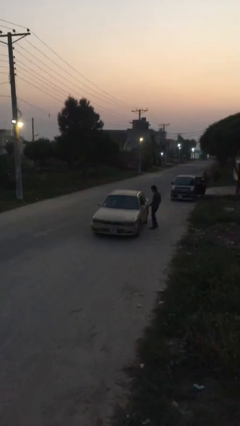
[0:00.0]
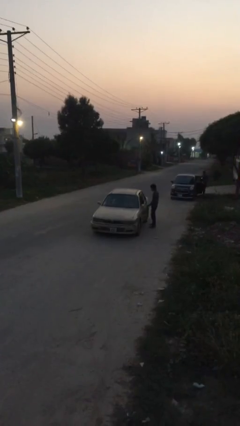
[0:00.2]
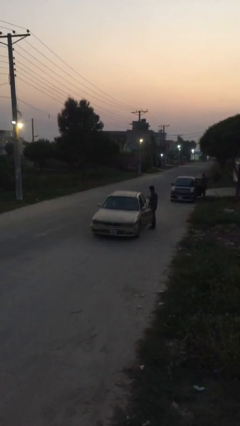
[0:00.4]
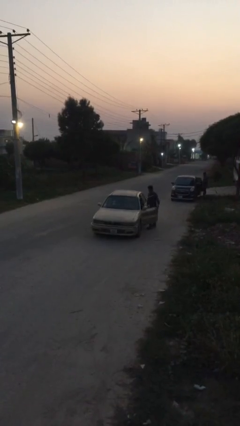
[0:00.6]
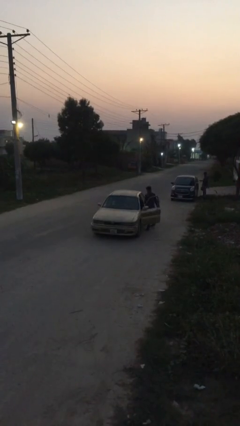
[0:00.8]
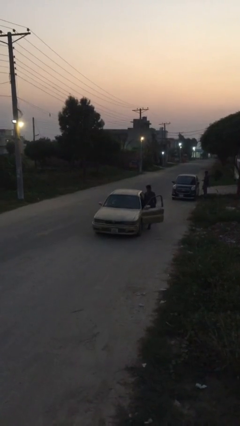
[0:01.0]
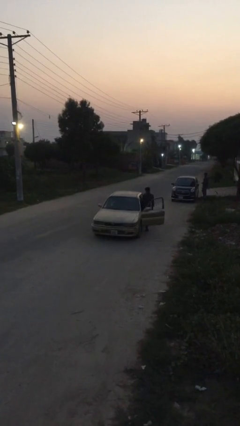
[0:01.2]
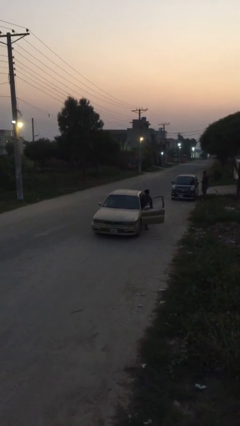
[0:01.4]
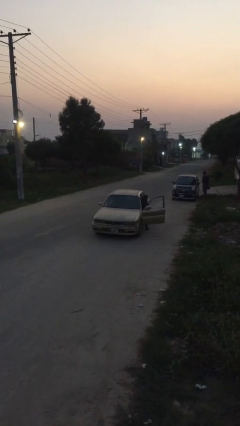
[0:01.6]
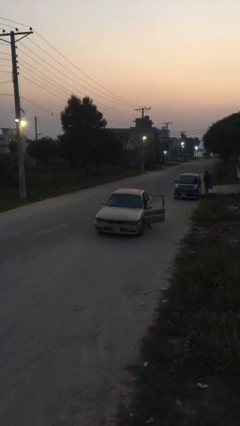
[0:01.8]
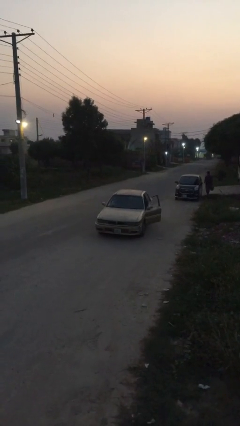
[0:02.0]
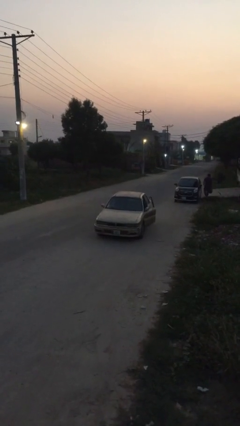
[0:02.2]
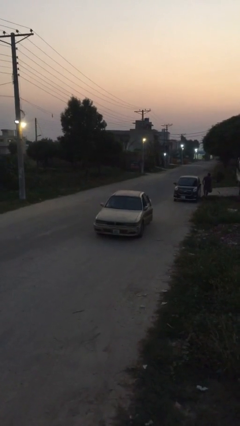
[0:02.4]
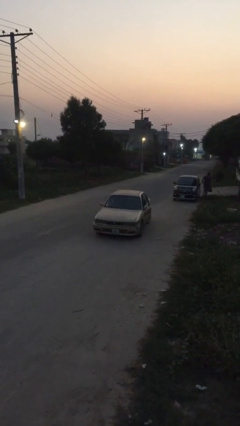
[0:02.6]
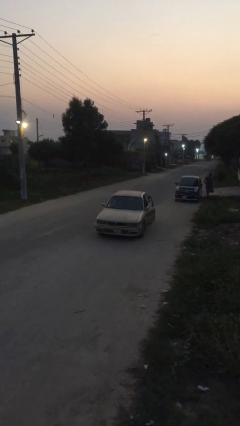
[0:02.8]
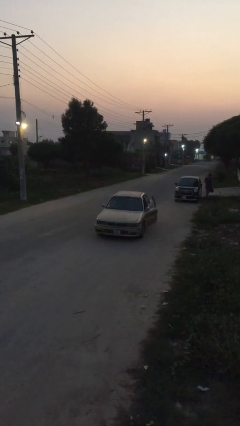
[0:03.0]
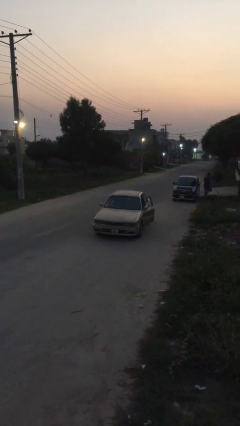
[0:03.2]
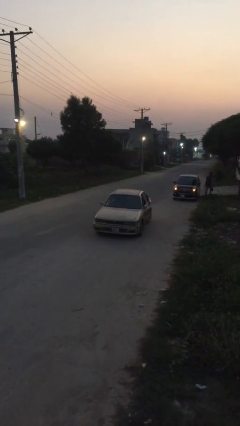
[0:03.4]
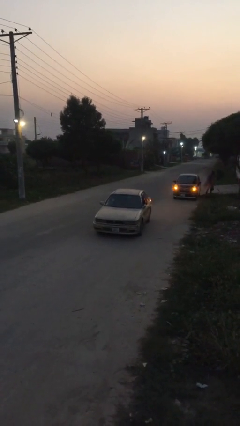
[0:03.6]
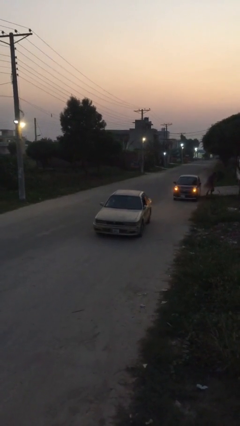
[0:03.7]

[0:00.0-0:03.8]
car picks up person

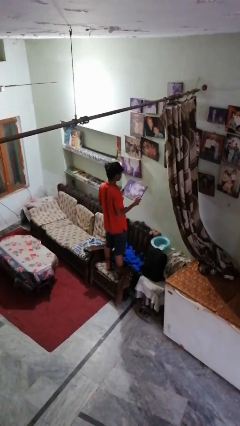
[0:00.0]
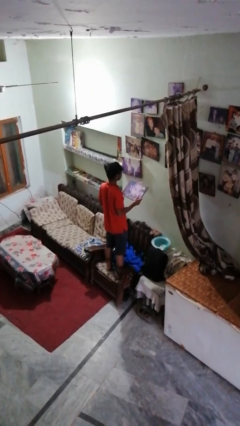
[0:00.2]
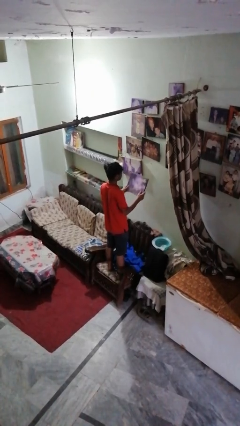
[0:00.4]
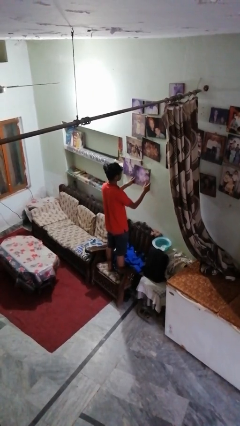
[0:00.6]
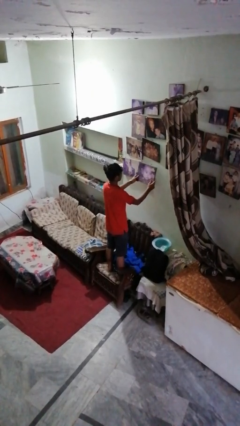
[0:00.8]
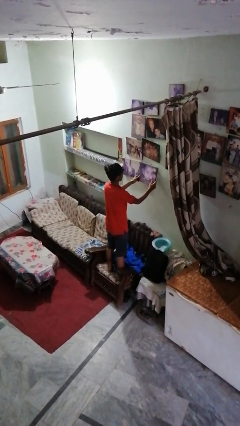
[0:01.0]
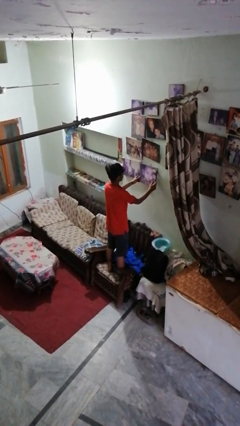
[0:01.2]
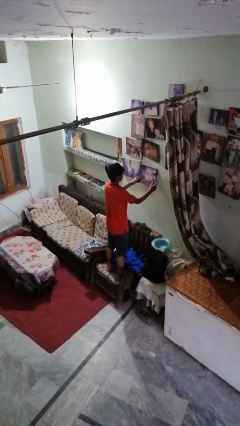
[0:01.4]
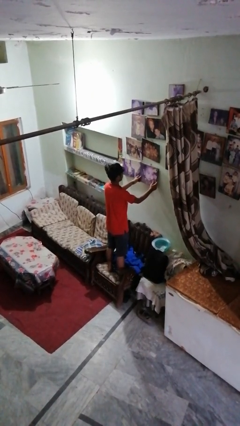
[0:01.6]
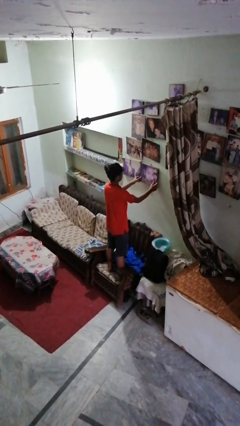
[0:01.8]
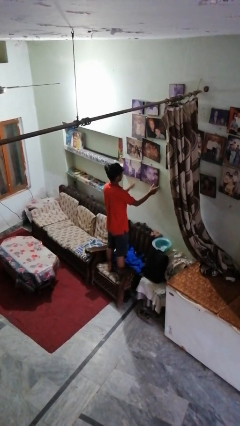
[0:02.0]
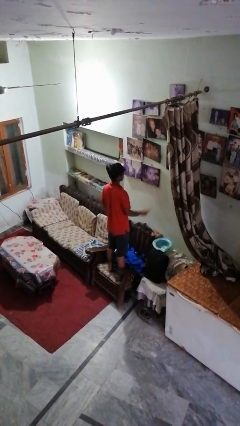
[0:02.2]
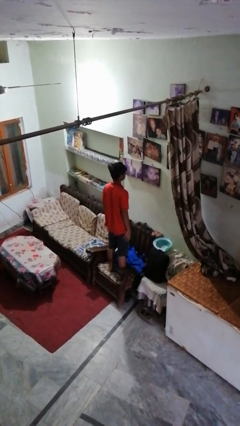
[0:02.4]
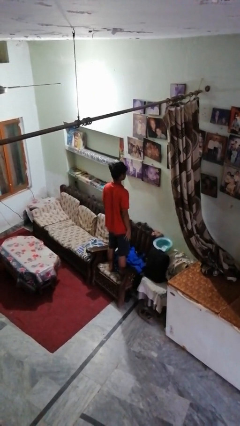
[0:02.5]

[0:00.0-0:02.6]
person puts up picture frame

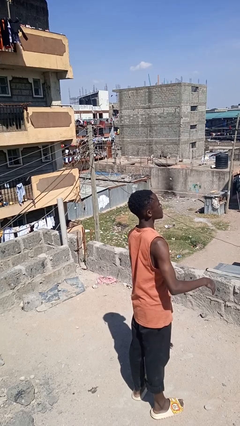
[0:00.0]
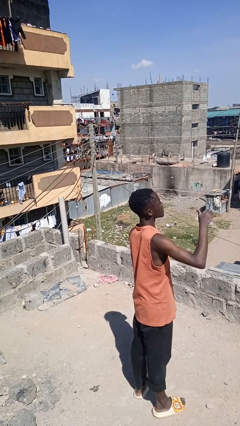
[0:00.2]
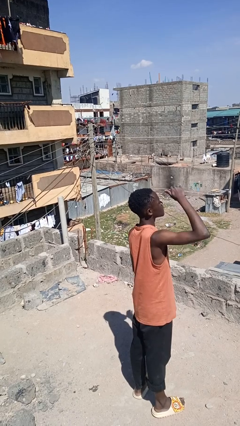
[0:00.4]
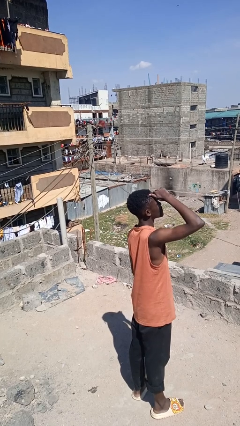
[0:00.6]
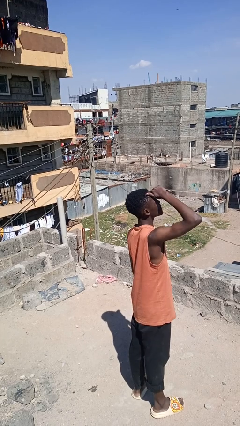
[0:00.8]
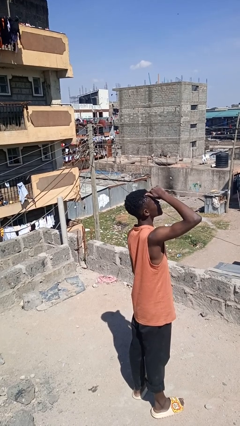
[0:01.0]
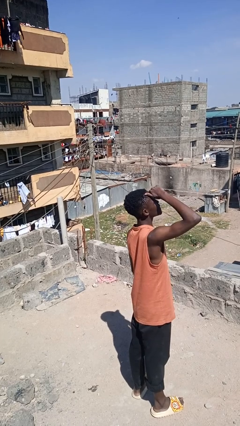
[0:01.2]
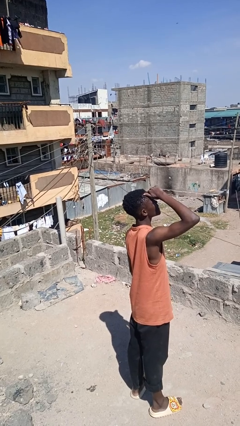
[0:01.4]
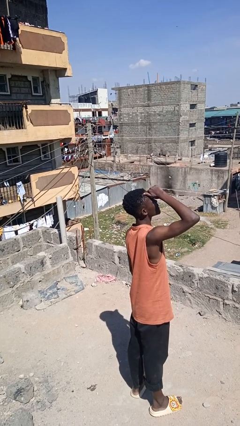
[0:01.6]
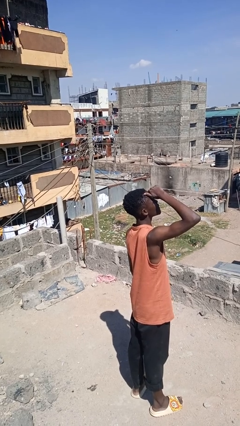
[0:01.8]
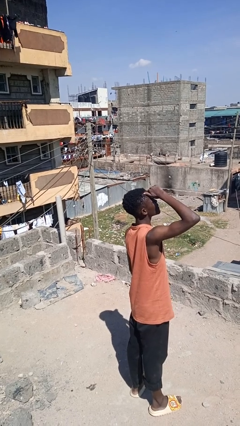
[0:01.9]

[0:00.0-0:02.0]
person shades eyes

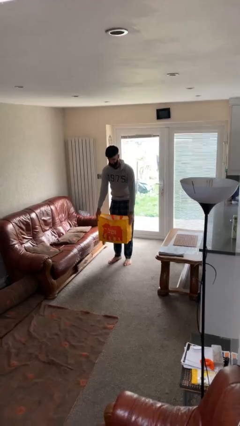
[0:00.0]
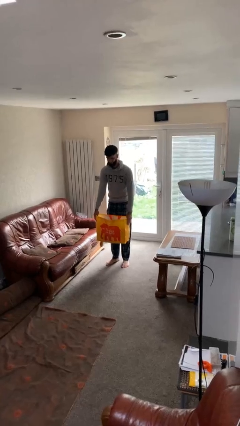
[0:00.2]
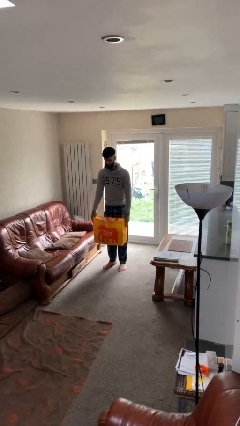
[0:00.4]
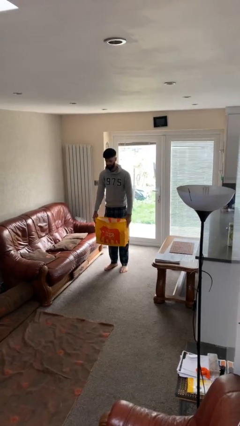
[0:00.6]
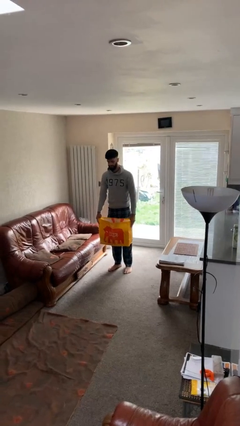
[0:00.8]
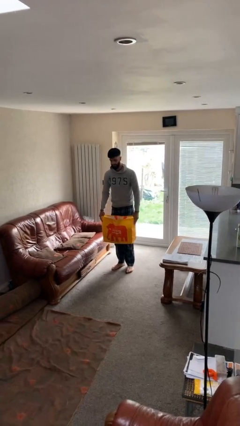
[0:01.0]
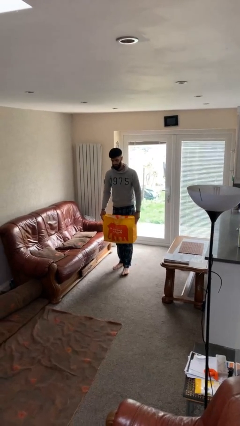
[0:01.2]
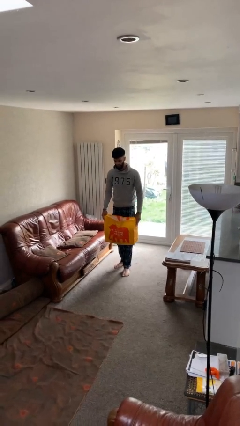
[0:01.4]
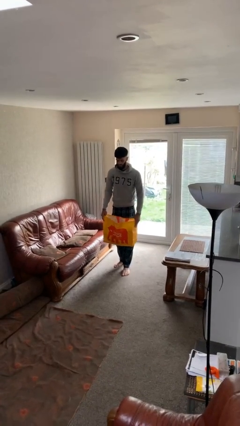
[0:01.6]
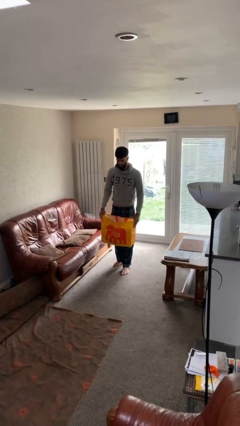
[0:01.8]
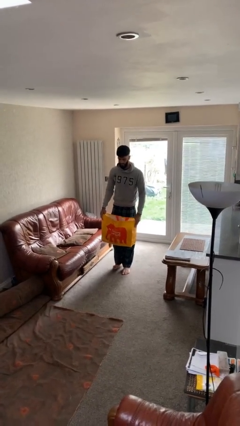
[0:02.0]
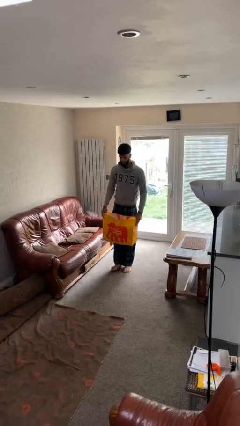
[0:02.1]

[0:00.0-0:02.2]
person carries heavy object

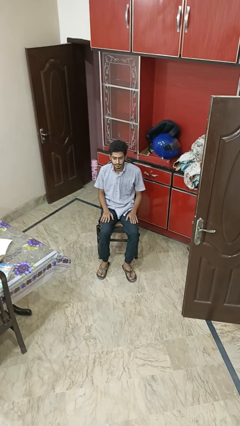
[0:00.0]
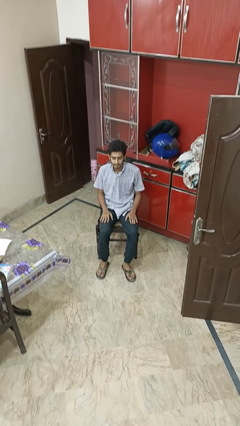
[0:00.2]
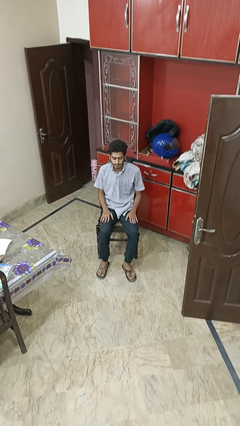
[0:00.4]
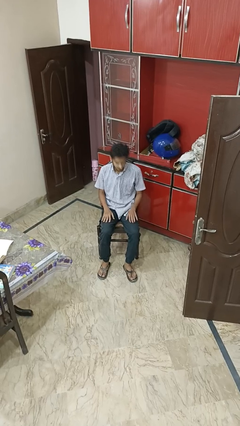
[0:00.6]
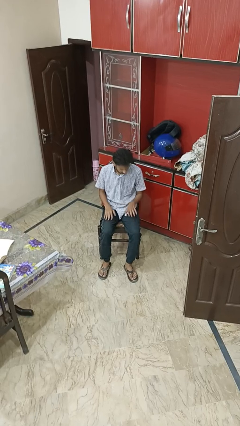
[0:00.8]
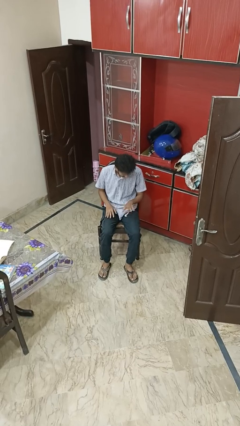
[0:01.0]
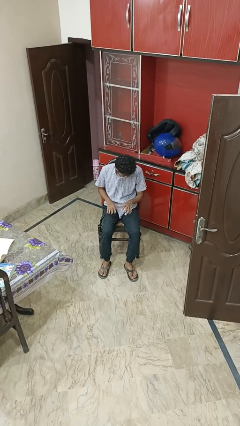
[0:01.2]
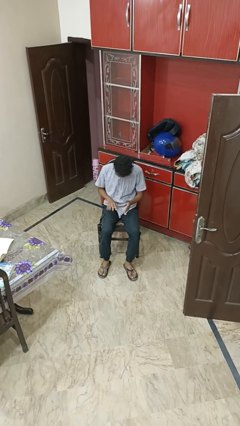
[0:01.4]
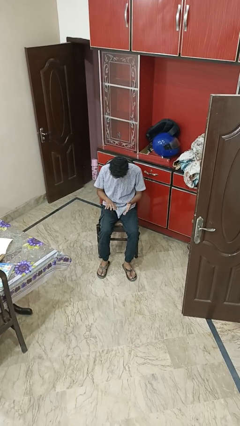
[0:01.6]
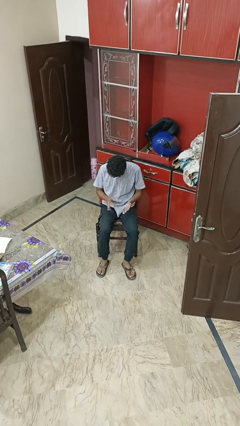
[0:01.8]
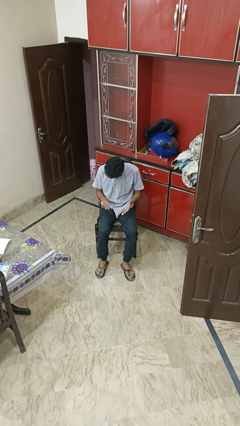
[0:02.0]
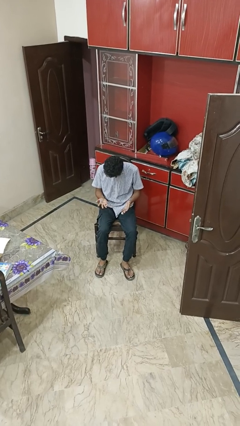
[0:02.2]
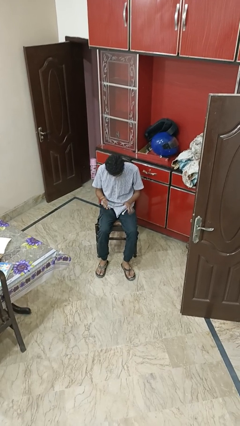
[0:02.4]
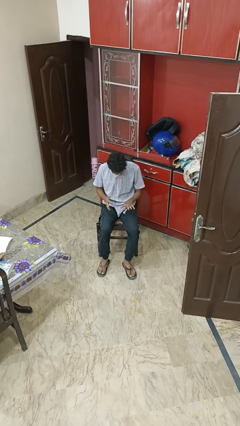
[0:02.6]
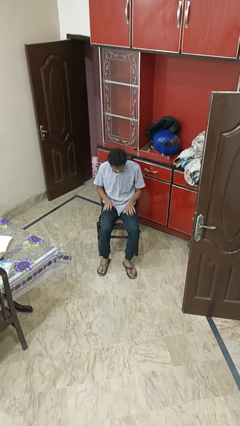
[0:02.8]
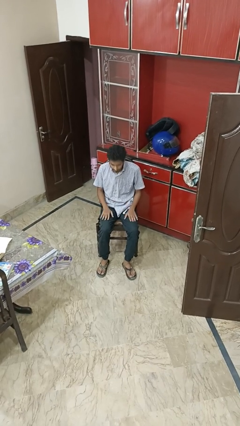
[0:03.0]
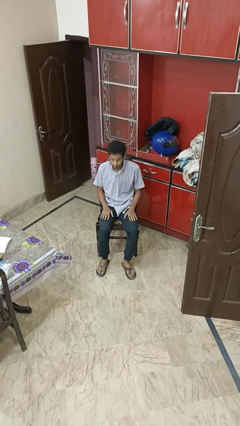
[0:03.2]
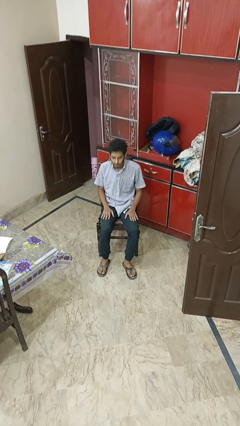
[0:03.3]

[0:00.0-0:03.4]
person looks at hands in lap

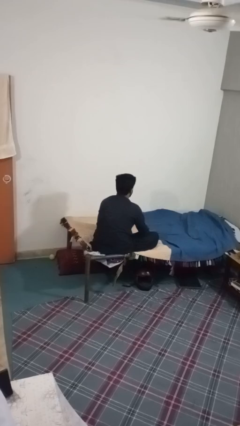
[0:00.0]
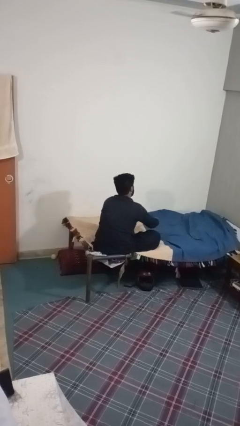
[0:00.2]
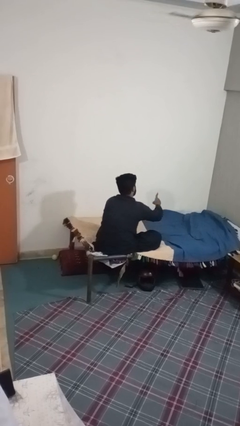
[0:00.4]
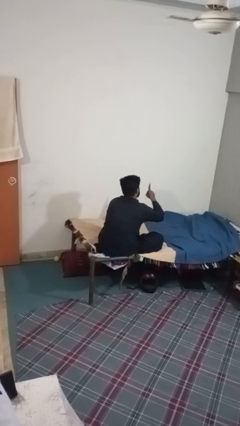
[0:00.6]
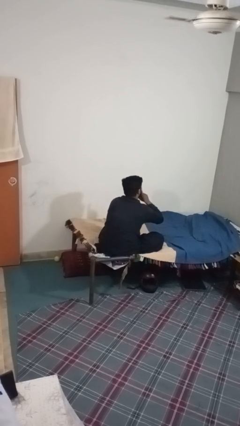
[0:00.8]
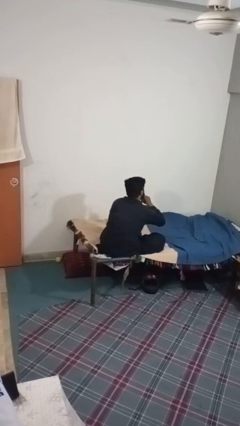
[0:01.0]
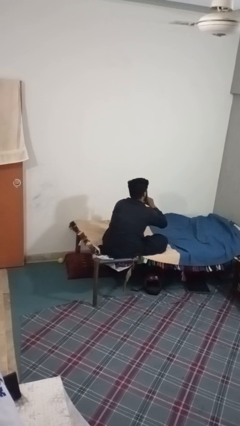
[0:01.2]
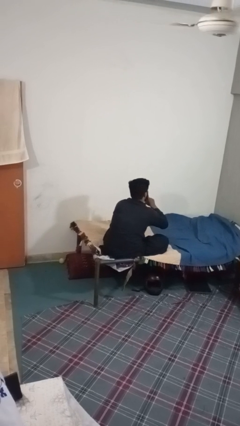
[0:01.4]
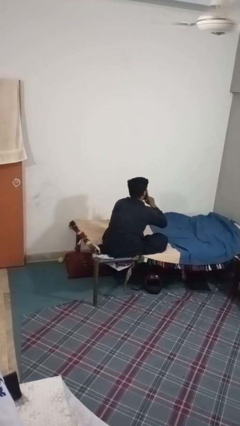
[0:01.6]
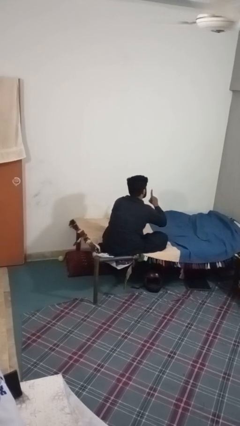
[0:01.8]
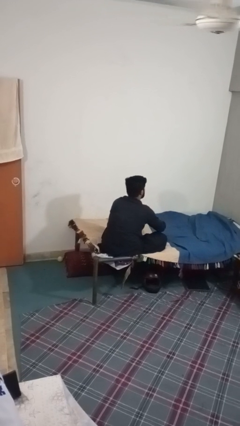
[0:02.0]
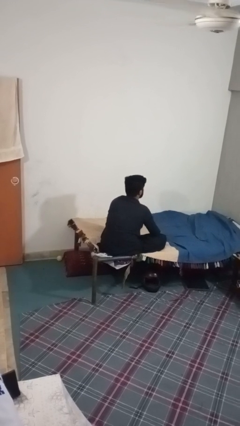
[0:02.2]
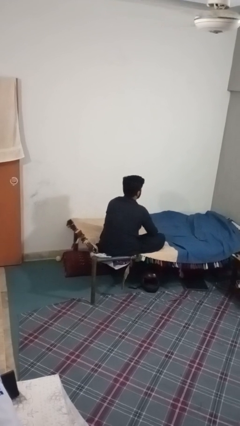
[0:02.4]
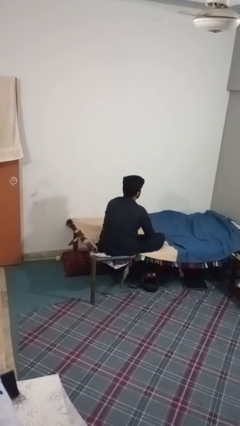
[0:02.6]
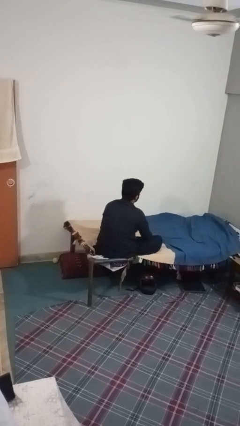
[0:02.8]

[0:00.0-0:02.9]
person gestures be quiet

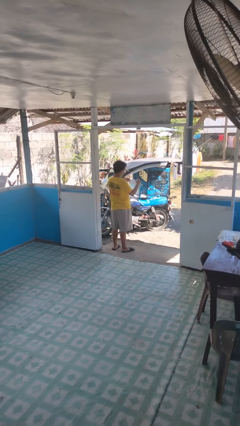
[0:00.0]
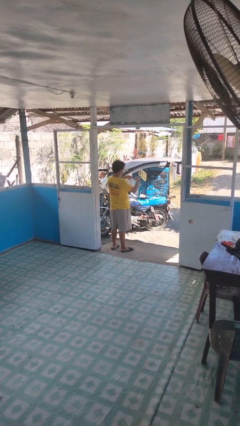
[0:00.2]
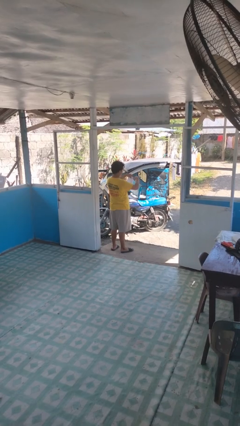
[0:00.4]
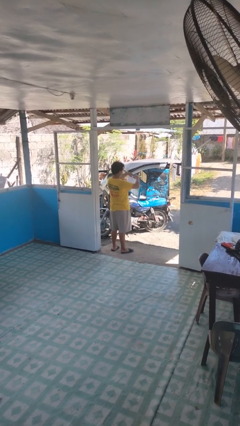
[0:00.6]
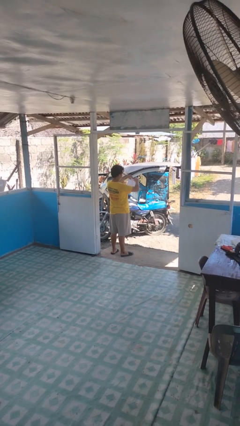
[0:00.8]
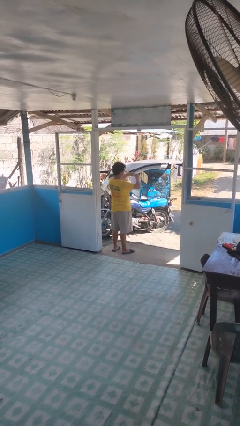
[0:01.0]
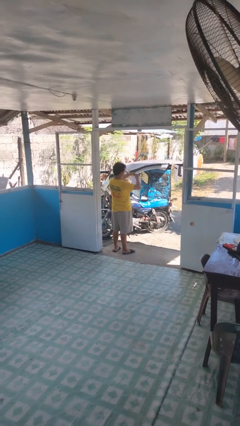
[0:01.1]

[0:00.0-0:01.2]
person tears paper
